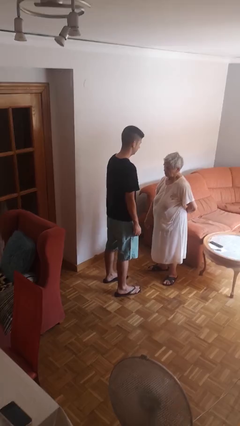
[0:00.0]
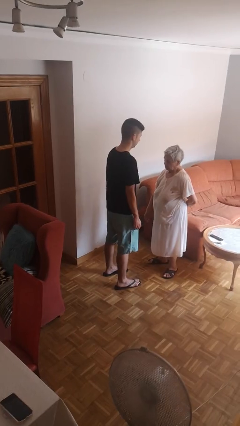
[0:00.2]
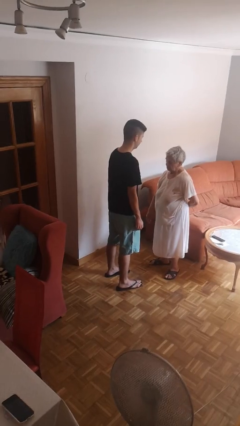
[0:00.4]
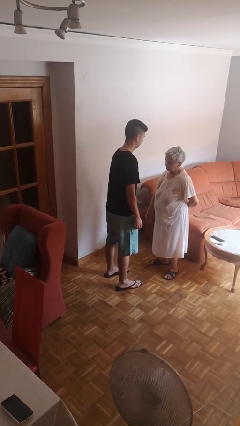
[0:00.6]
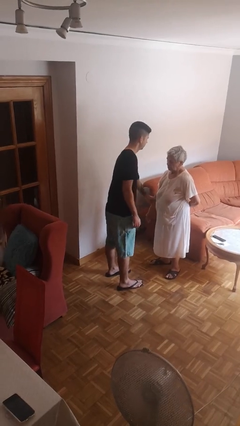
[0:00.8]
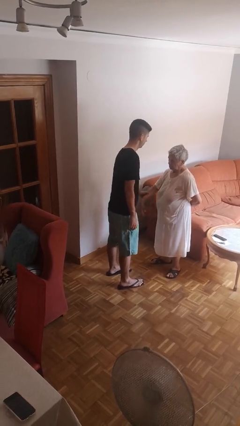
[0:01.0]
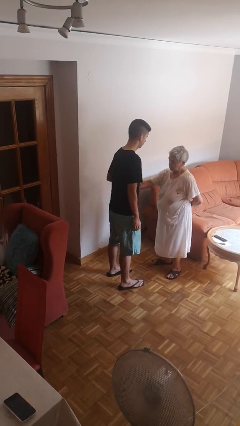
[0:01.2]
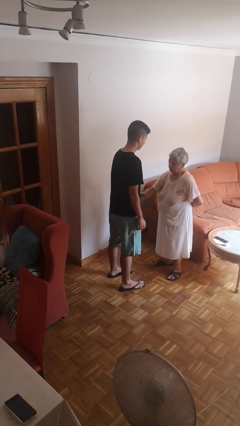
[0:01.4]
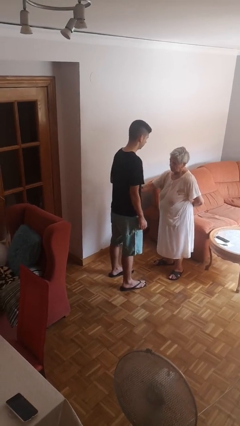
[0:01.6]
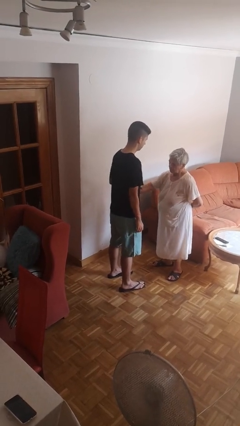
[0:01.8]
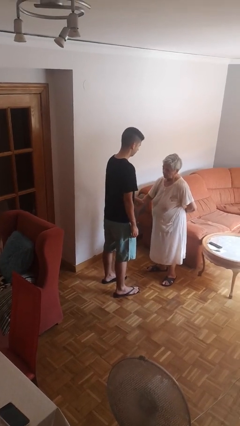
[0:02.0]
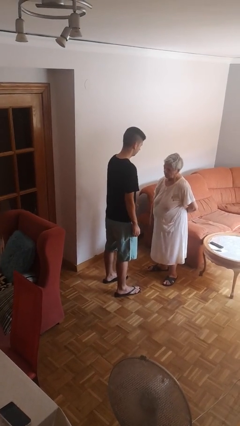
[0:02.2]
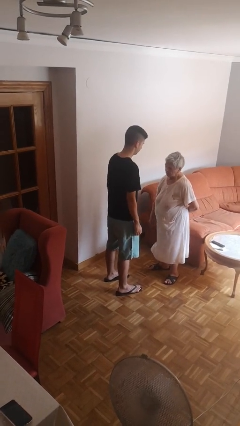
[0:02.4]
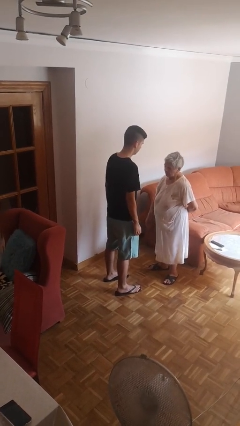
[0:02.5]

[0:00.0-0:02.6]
person grabs person by forearm

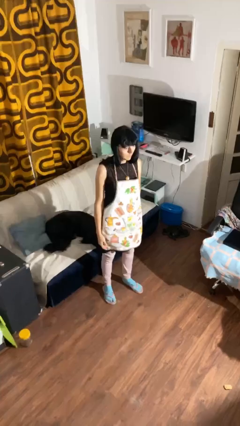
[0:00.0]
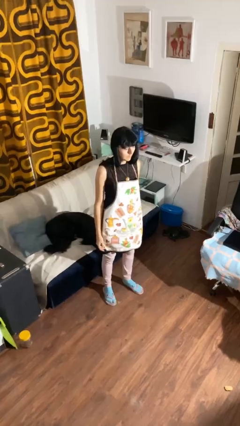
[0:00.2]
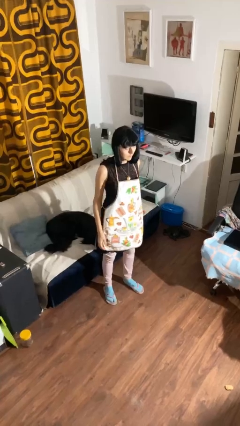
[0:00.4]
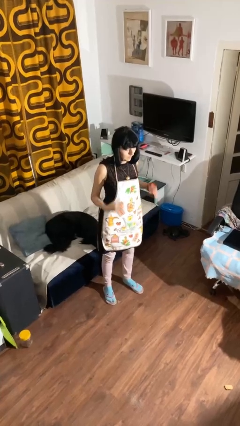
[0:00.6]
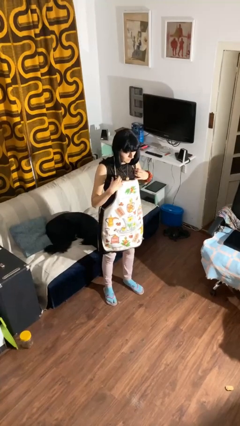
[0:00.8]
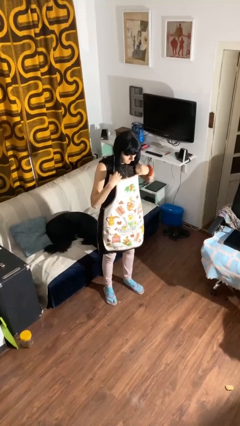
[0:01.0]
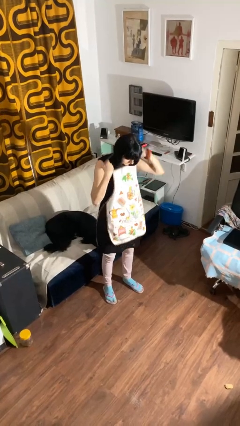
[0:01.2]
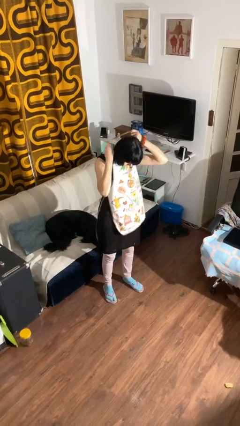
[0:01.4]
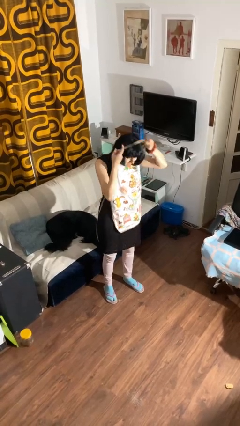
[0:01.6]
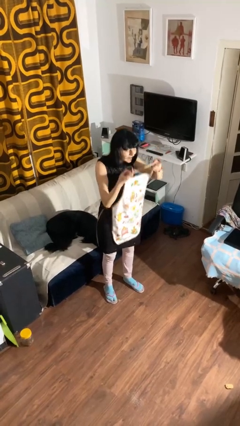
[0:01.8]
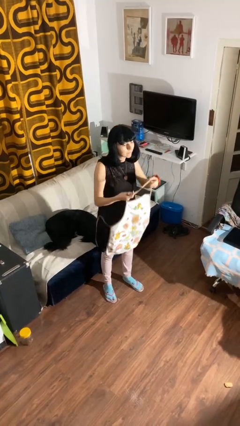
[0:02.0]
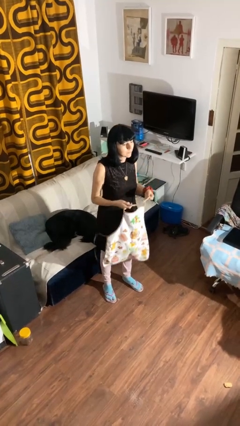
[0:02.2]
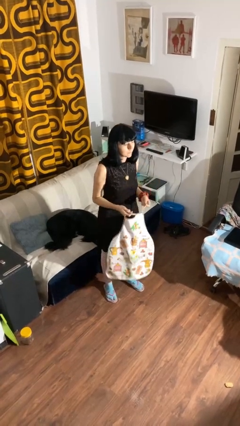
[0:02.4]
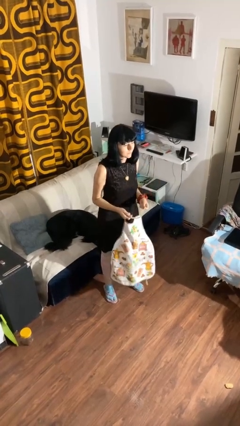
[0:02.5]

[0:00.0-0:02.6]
person takes off apron

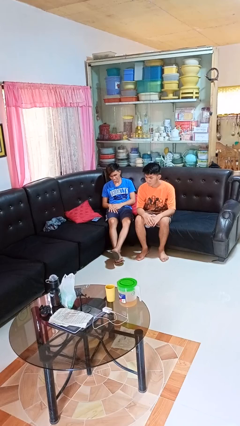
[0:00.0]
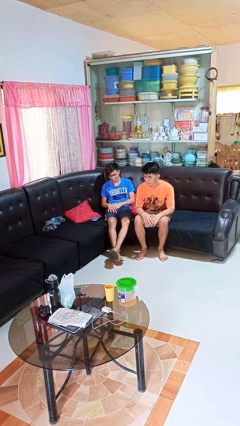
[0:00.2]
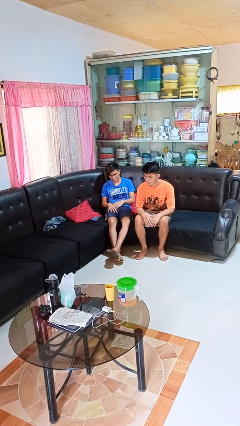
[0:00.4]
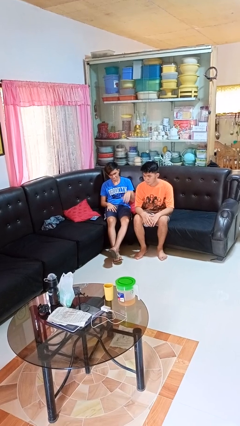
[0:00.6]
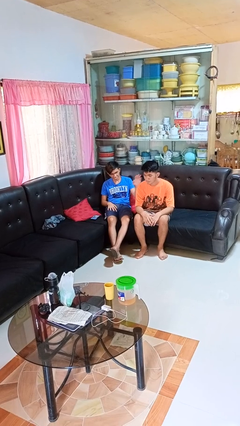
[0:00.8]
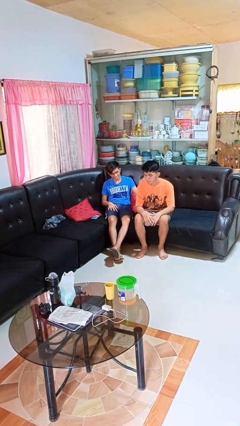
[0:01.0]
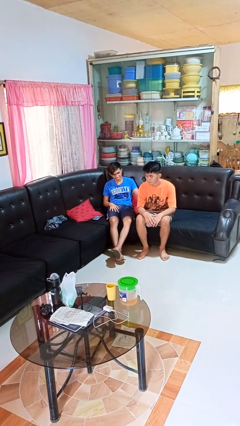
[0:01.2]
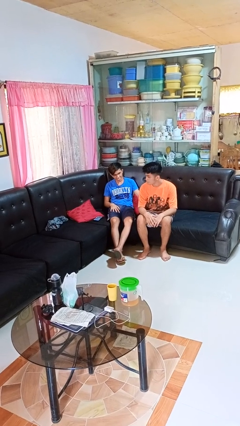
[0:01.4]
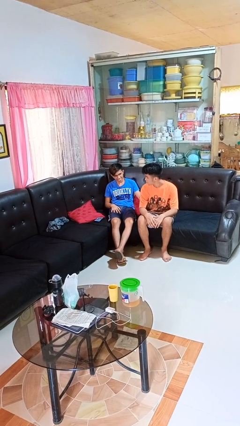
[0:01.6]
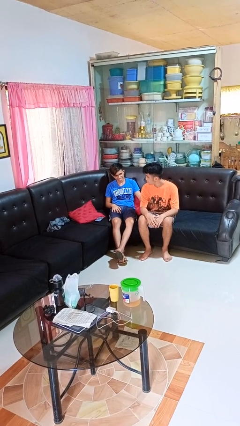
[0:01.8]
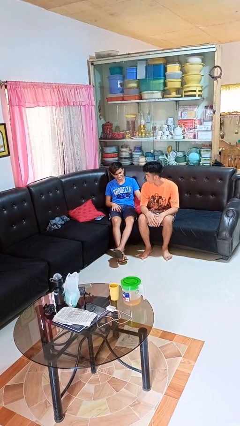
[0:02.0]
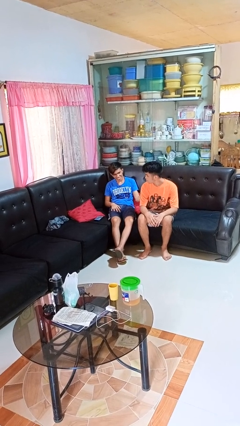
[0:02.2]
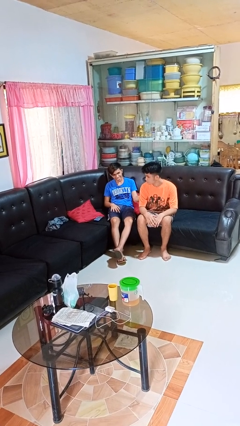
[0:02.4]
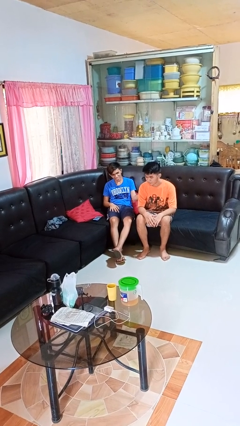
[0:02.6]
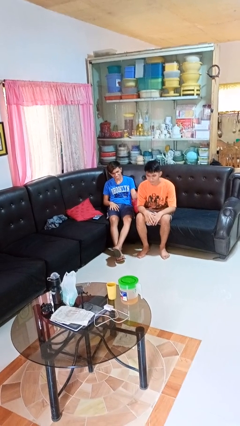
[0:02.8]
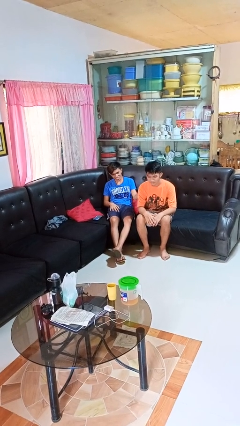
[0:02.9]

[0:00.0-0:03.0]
person touches back of person

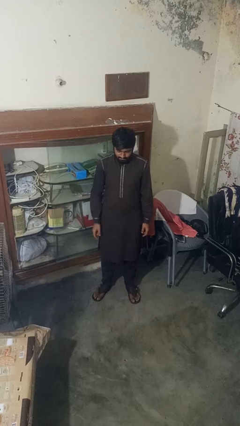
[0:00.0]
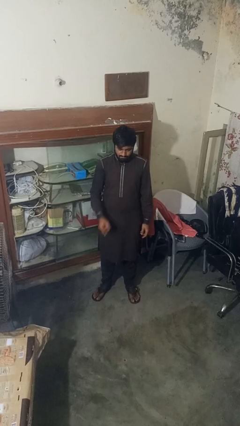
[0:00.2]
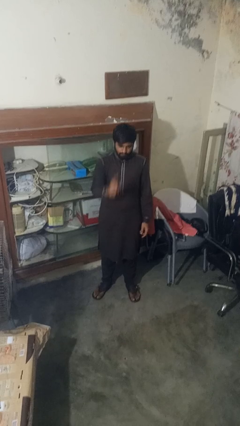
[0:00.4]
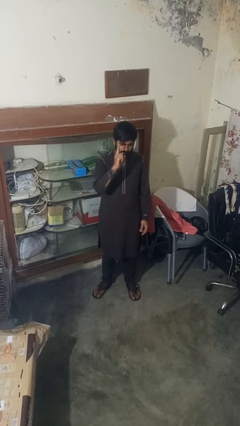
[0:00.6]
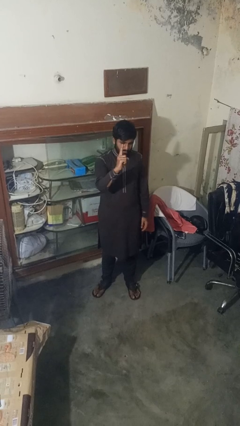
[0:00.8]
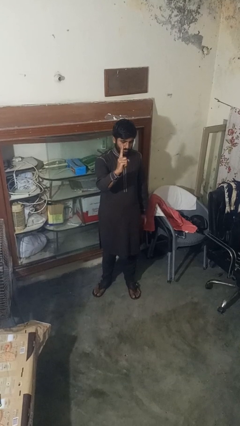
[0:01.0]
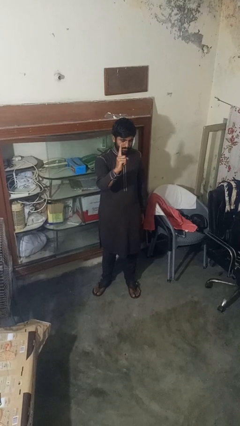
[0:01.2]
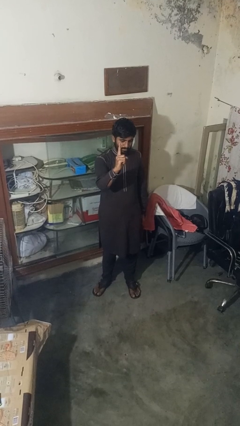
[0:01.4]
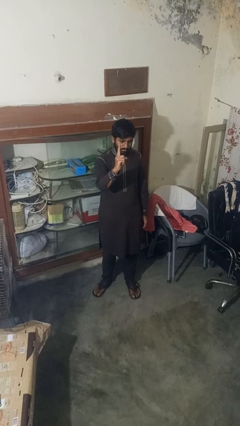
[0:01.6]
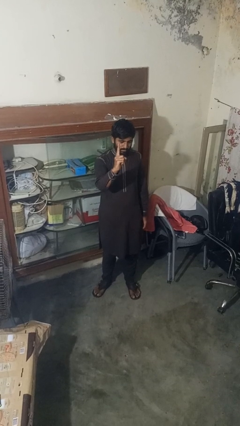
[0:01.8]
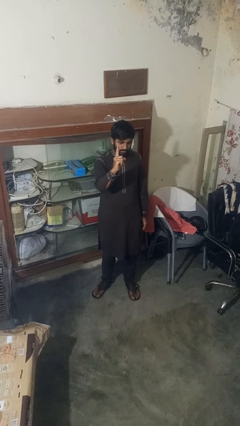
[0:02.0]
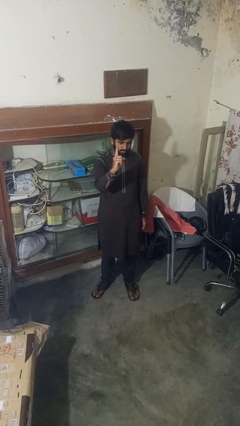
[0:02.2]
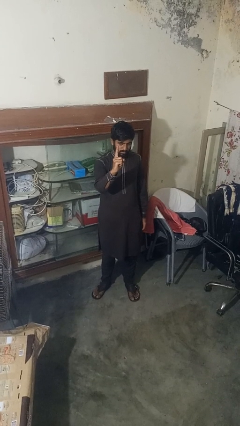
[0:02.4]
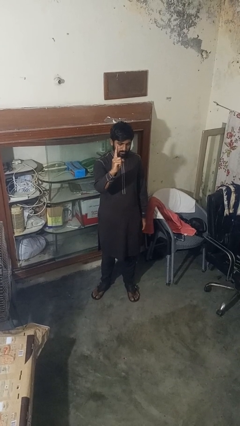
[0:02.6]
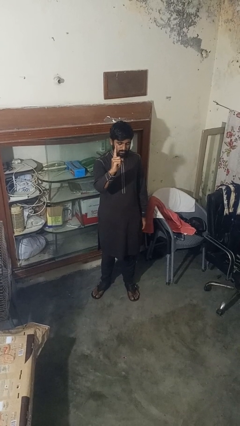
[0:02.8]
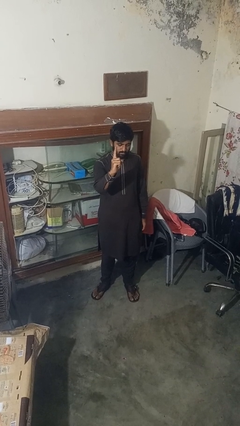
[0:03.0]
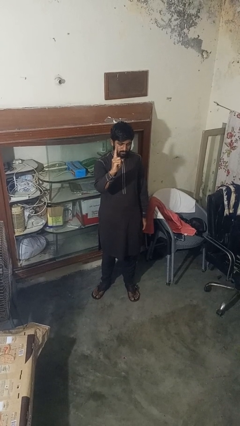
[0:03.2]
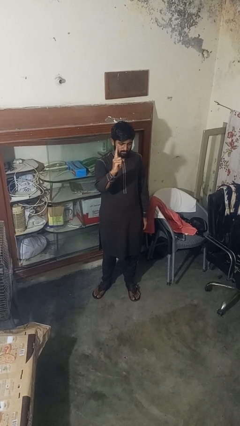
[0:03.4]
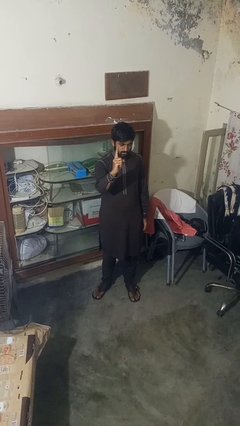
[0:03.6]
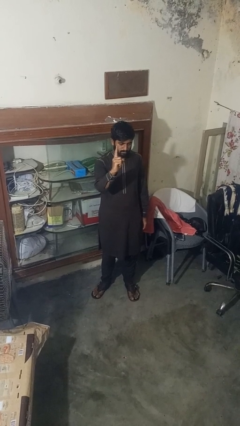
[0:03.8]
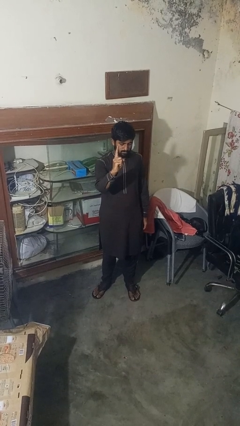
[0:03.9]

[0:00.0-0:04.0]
person gestures number one

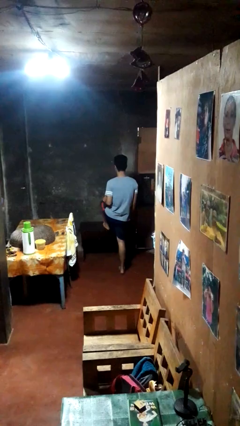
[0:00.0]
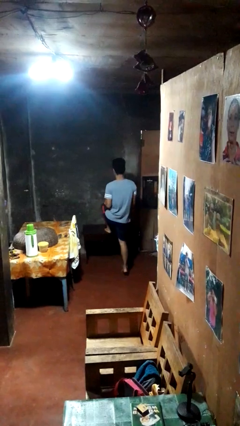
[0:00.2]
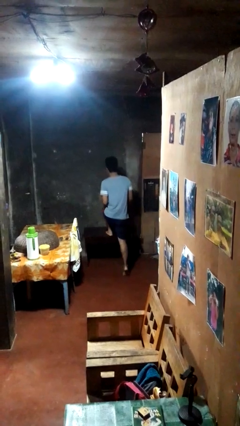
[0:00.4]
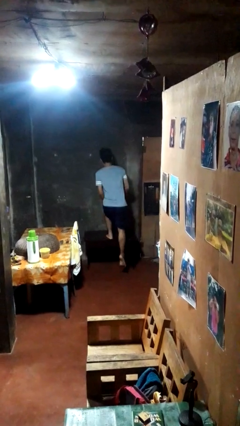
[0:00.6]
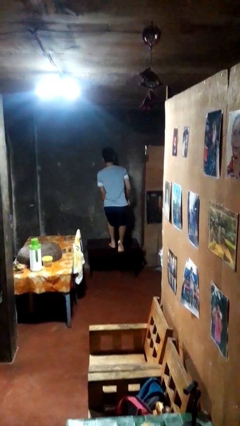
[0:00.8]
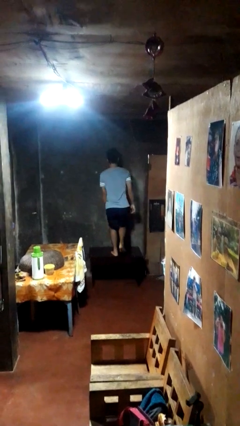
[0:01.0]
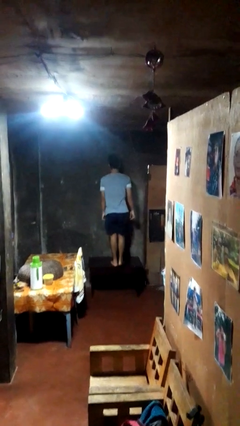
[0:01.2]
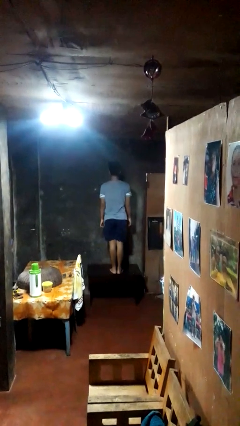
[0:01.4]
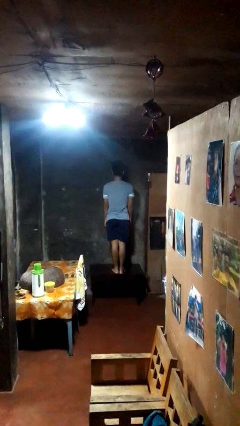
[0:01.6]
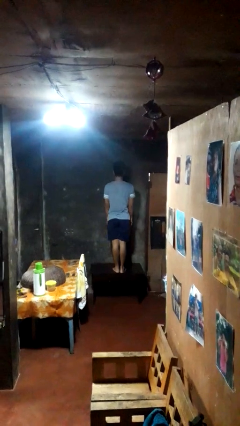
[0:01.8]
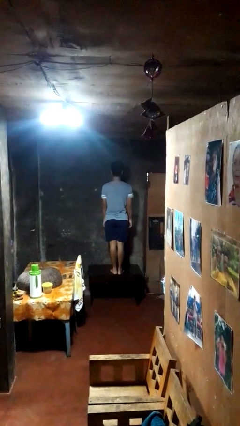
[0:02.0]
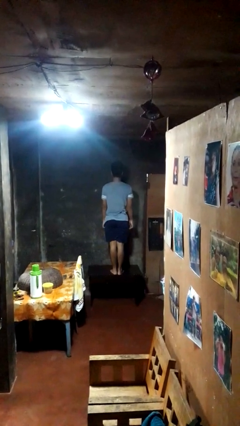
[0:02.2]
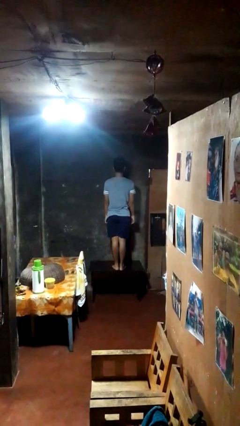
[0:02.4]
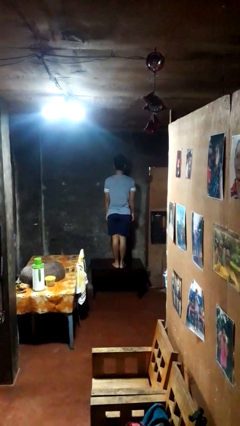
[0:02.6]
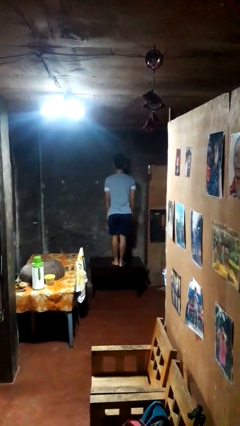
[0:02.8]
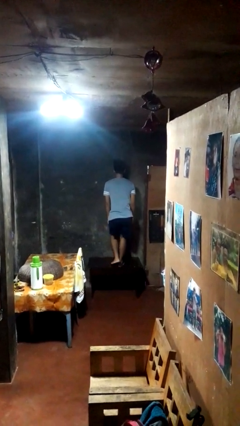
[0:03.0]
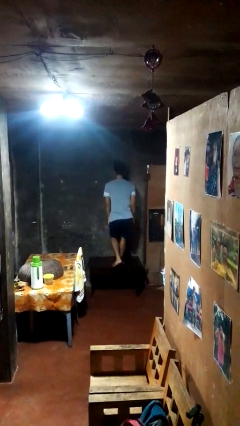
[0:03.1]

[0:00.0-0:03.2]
person climbs on table

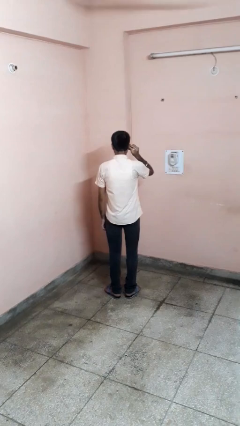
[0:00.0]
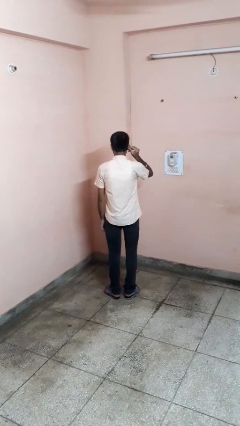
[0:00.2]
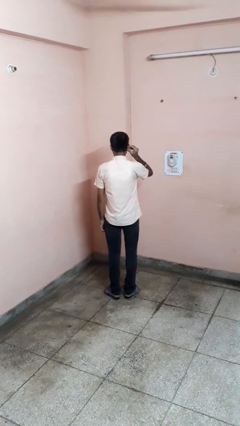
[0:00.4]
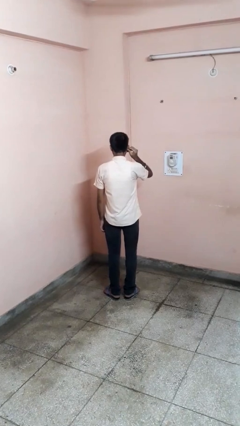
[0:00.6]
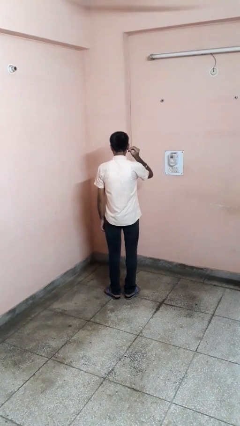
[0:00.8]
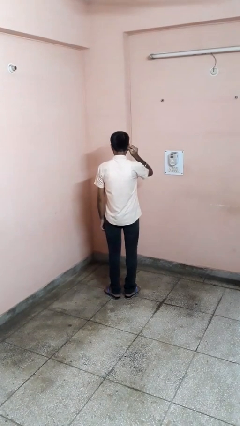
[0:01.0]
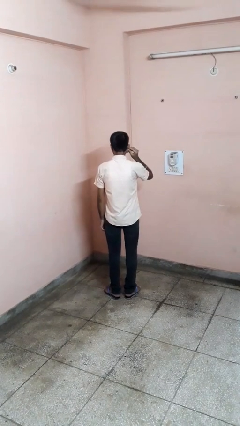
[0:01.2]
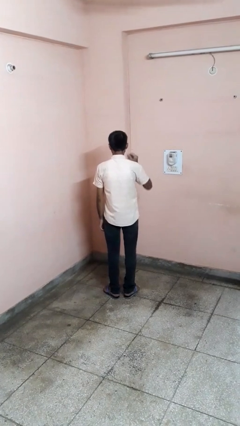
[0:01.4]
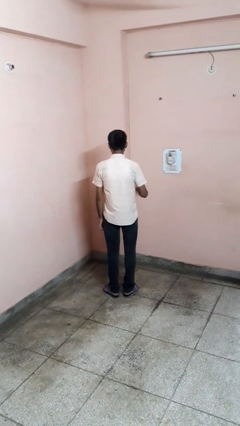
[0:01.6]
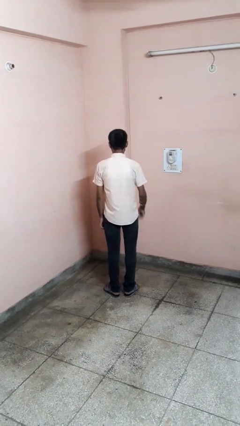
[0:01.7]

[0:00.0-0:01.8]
person touches earlobe
